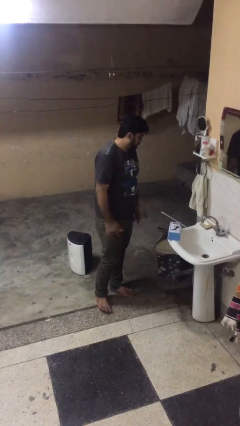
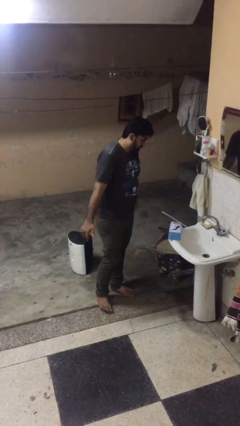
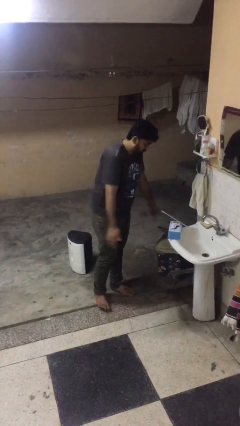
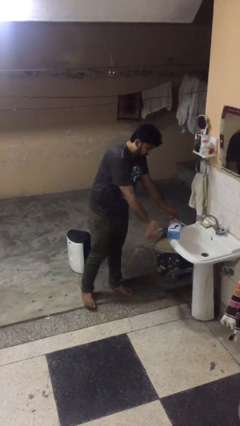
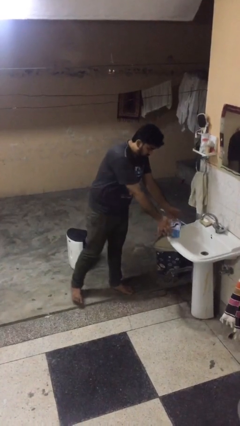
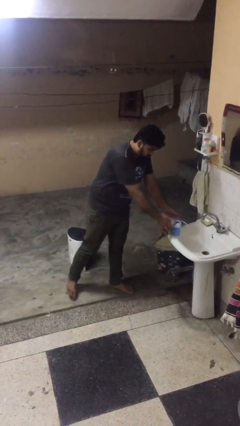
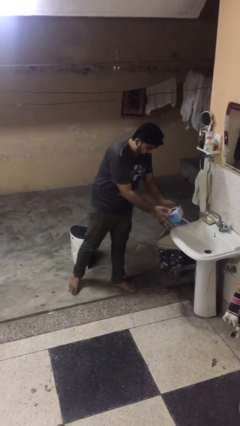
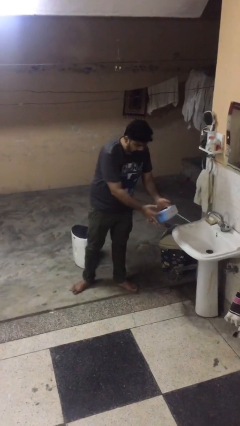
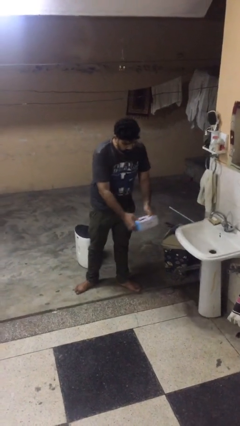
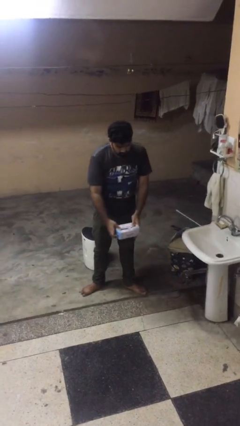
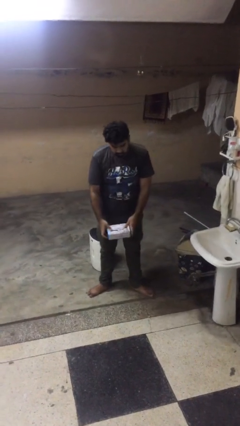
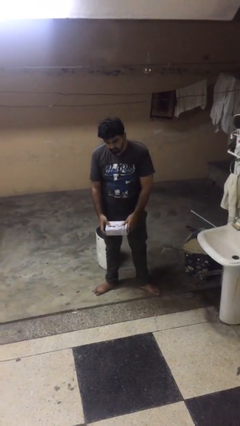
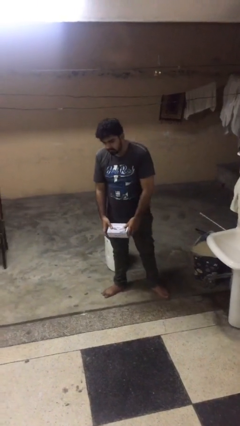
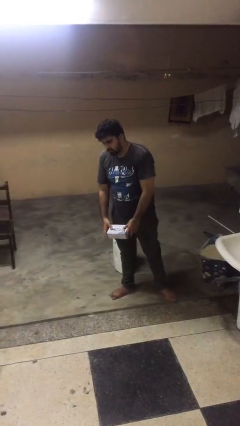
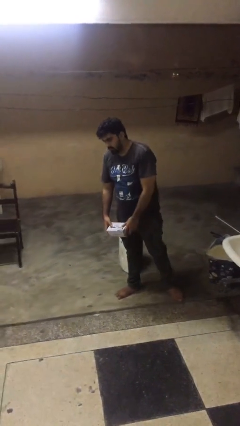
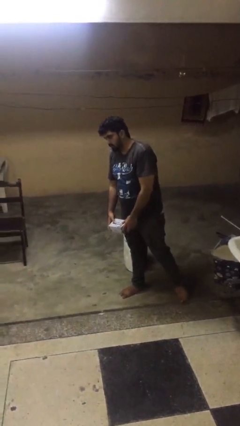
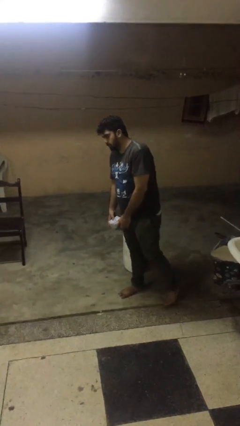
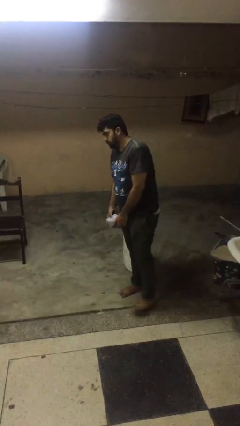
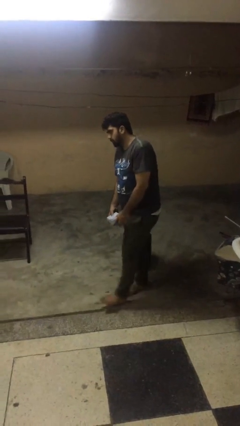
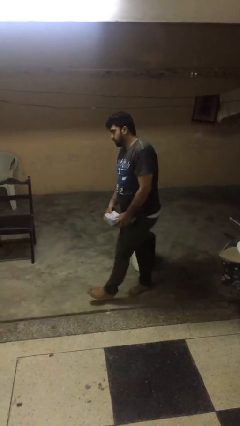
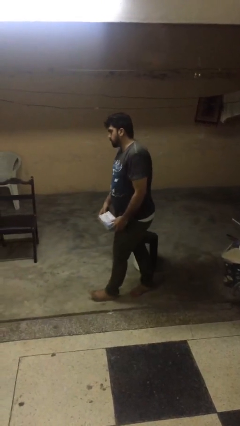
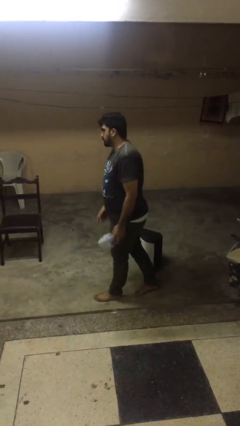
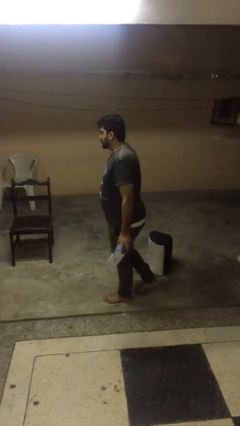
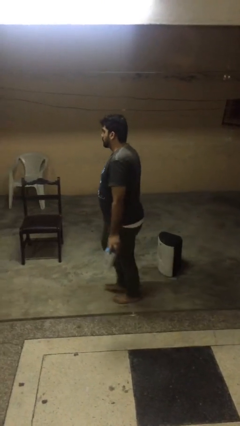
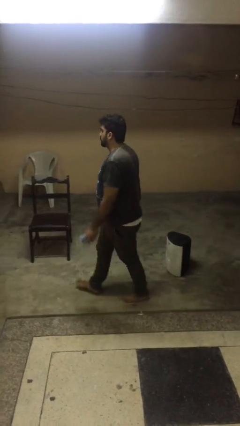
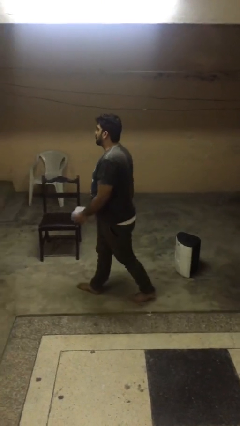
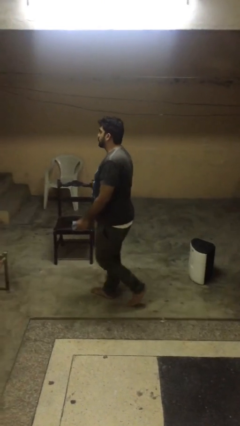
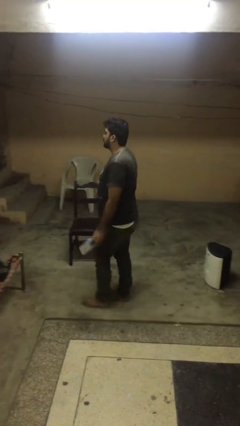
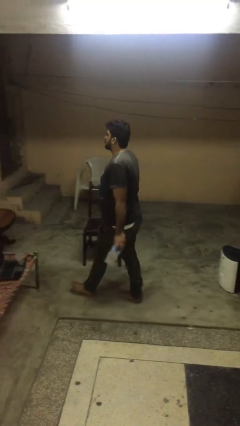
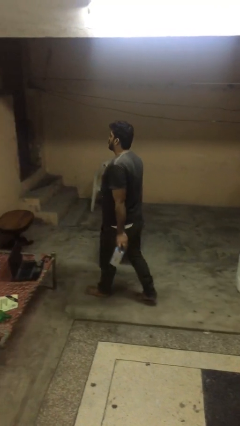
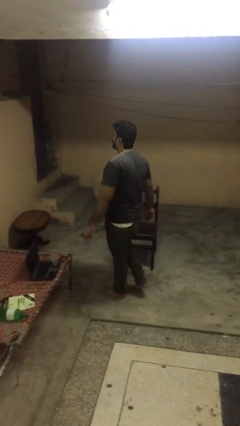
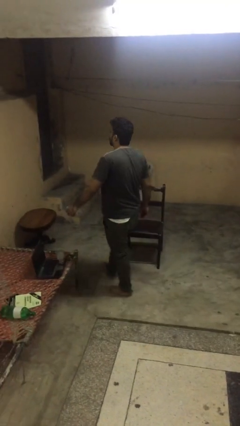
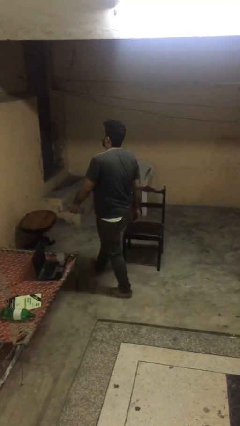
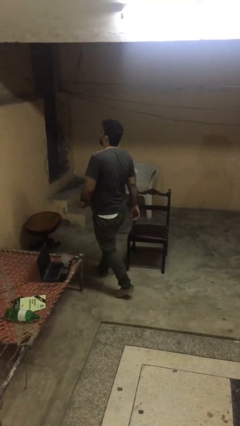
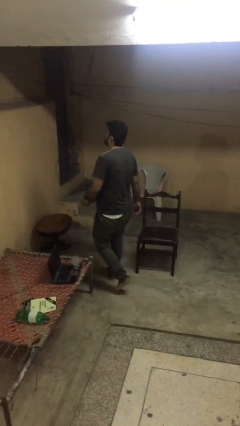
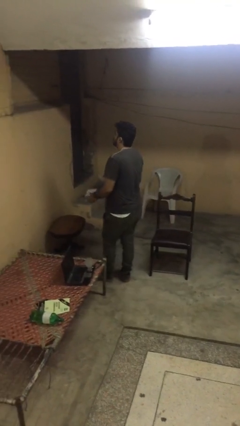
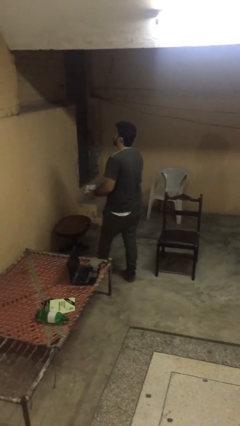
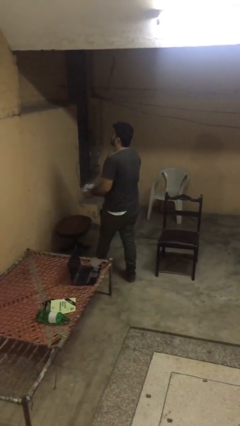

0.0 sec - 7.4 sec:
person picks up object from table

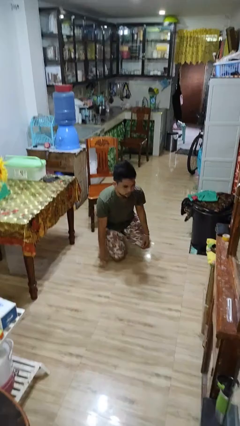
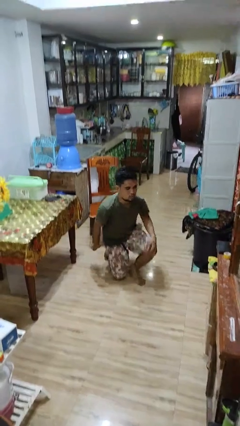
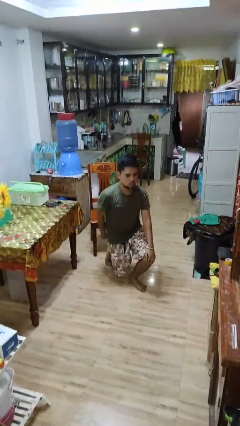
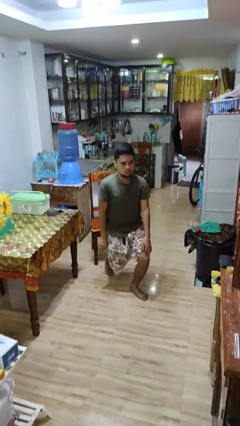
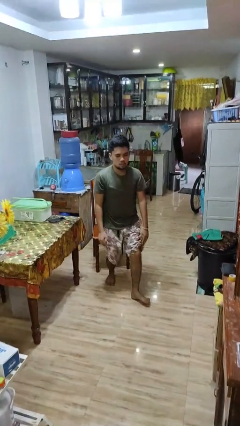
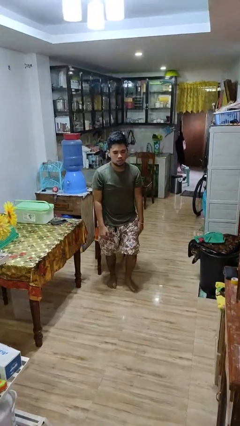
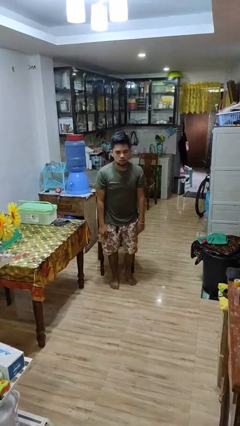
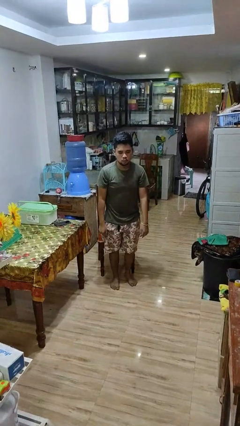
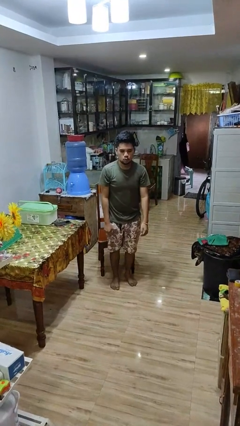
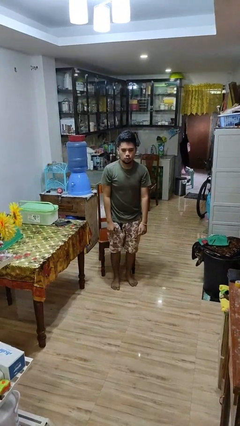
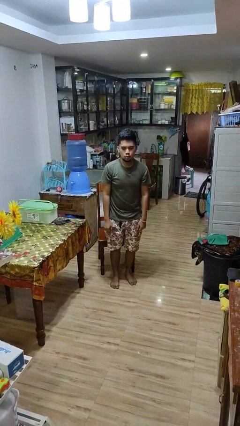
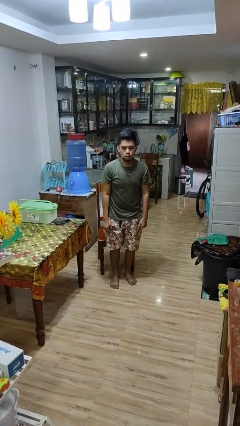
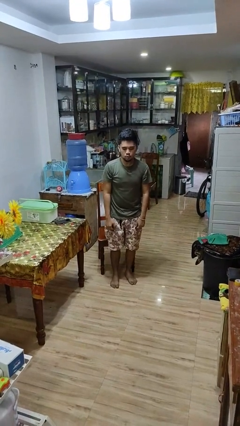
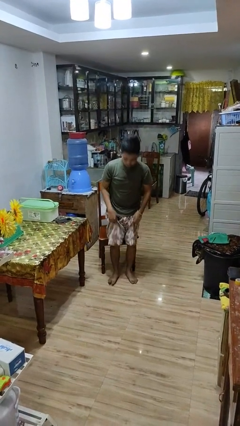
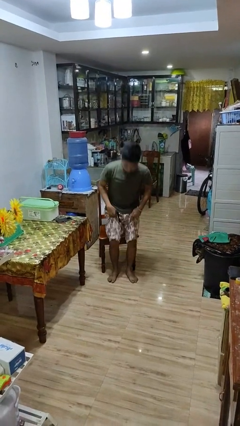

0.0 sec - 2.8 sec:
person stands up from floor

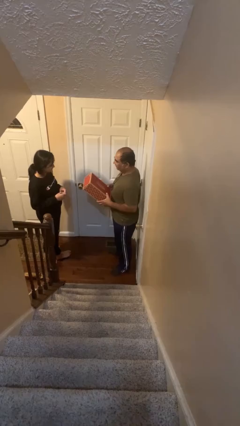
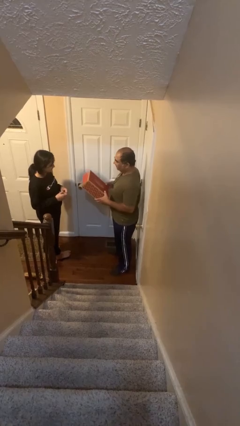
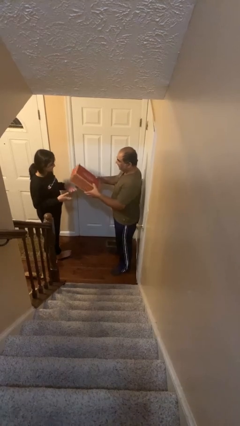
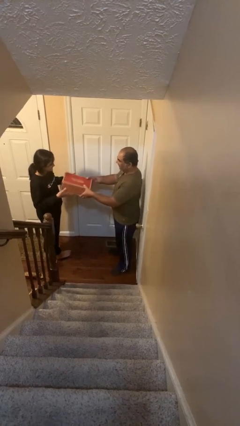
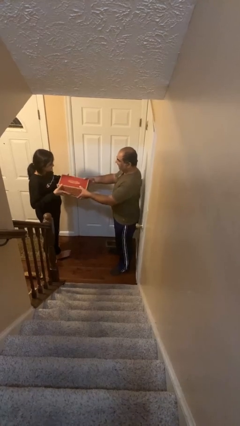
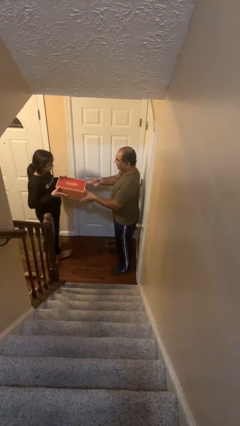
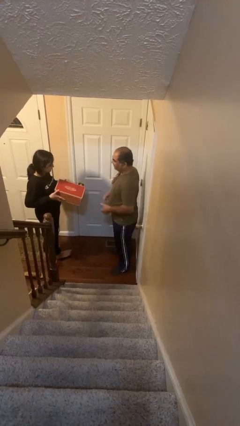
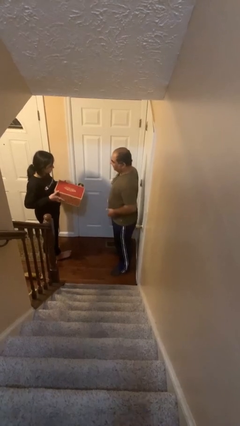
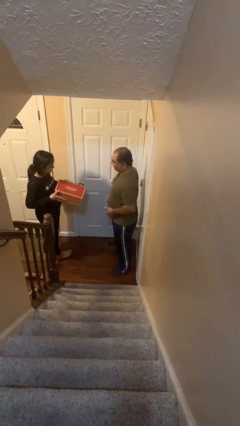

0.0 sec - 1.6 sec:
person transfers object to person

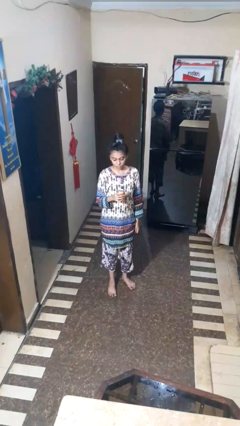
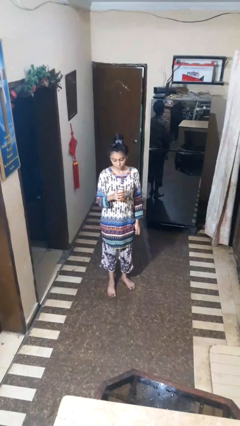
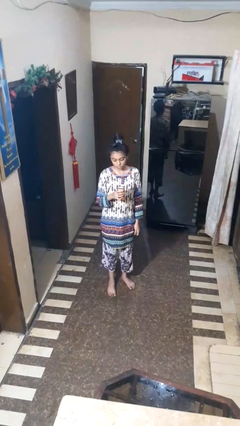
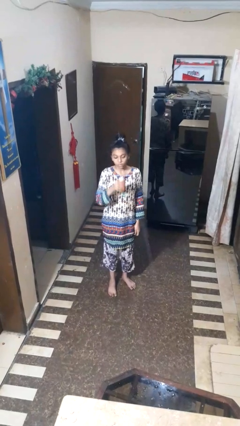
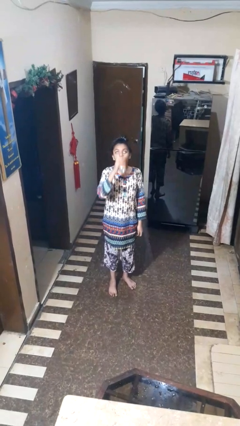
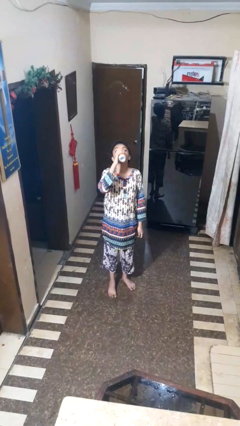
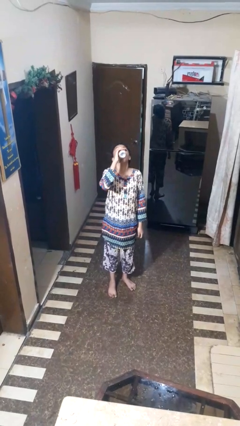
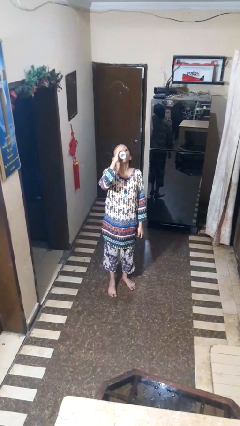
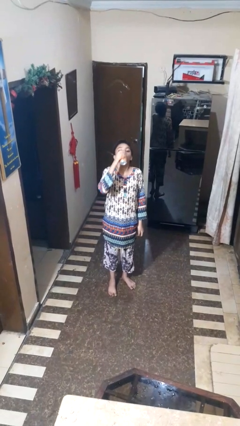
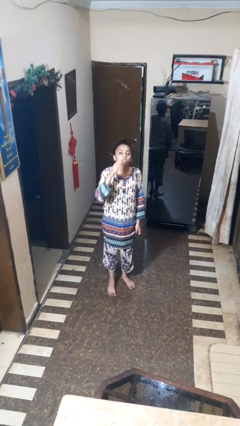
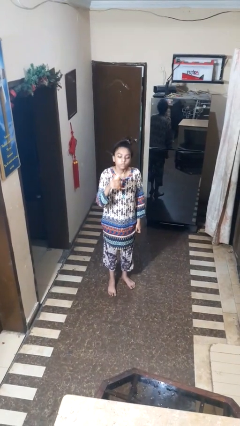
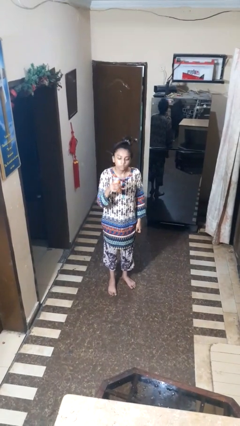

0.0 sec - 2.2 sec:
person drinks from beverage can

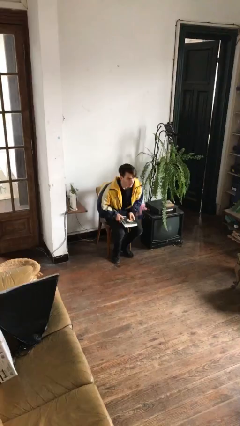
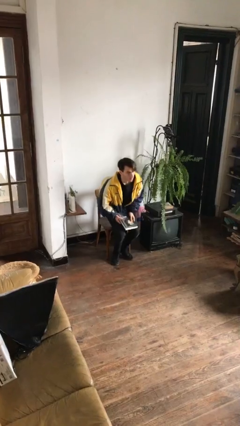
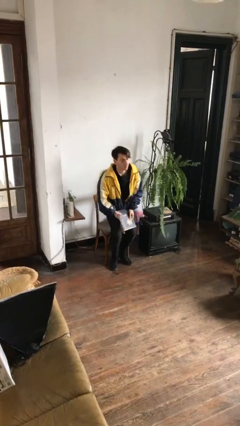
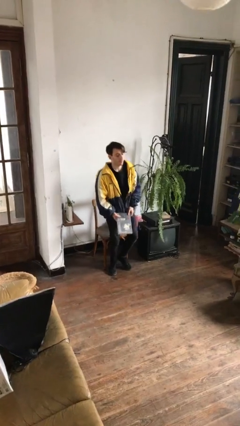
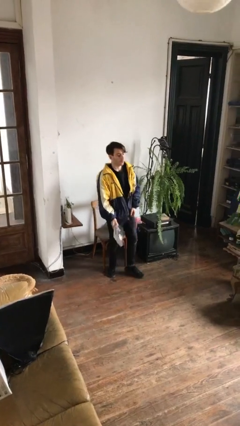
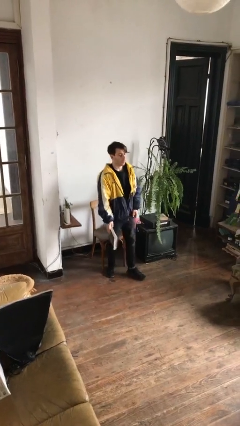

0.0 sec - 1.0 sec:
person stands up

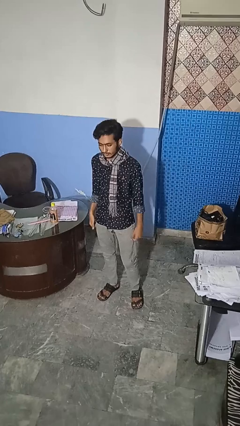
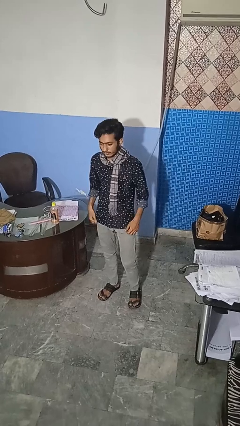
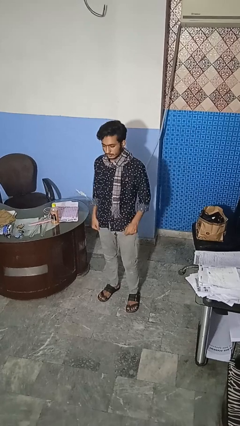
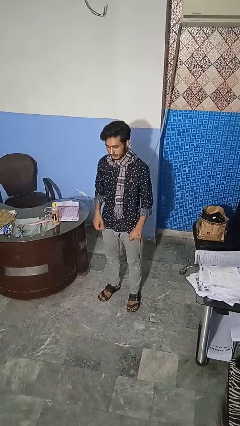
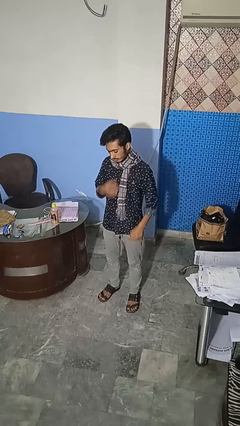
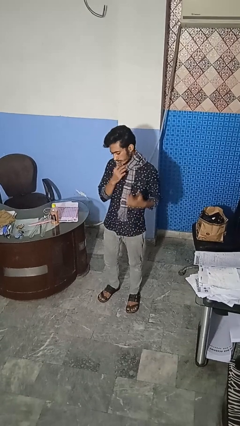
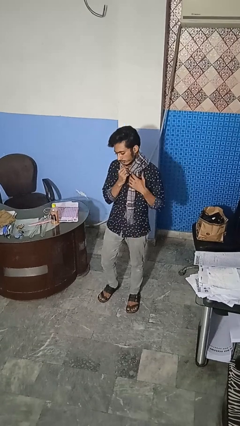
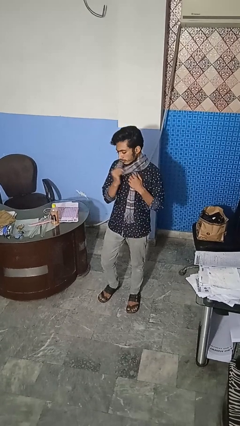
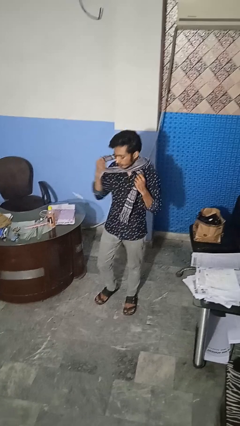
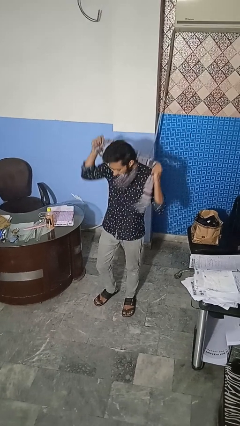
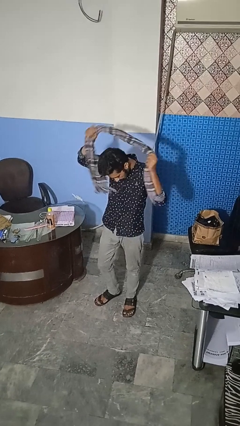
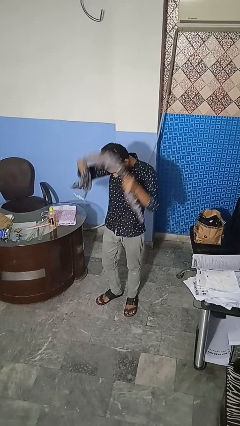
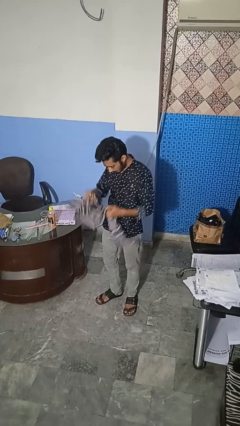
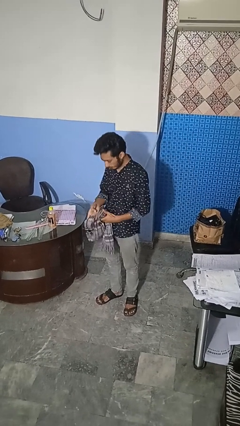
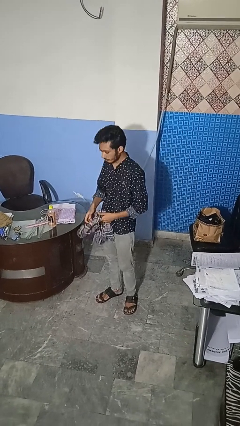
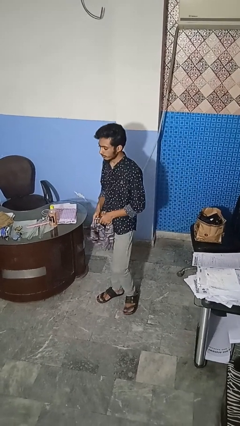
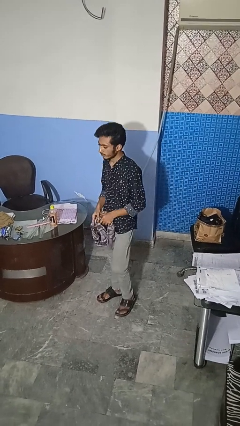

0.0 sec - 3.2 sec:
person takes off scarf
